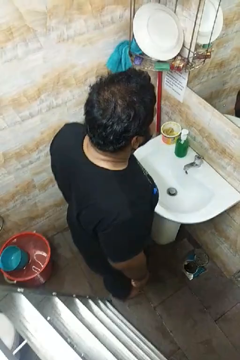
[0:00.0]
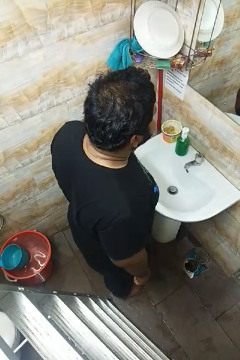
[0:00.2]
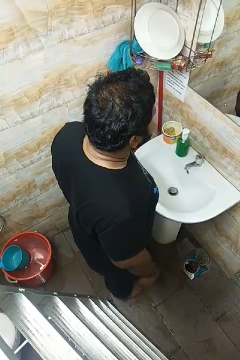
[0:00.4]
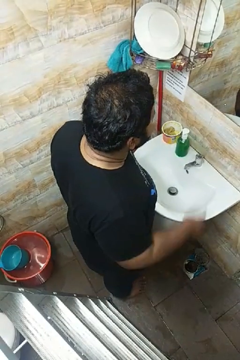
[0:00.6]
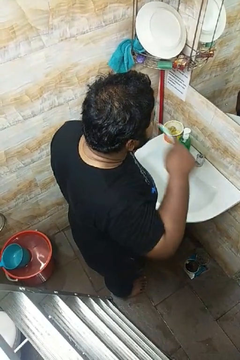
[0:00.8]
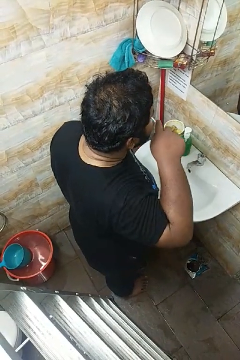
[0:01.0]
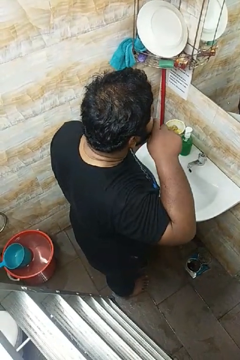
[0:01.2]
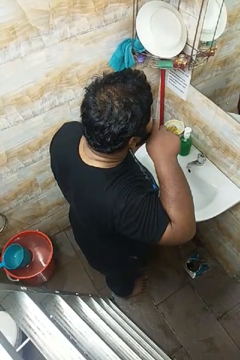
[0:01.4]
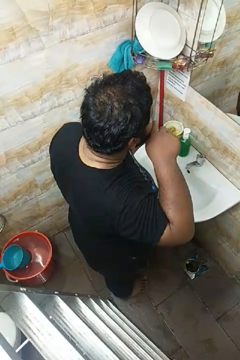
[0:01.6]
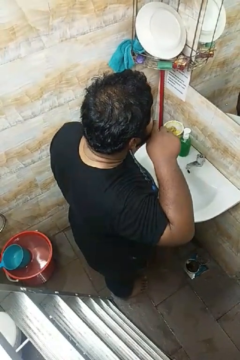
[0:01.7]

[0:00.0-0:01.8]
person brushes teeth

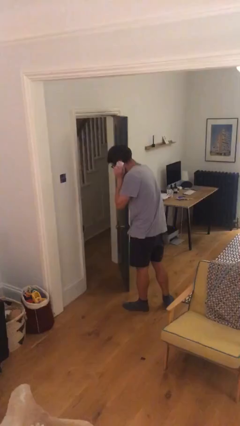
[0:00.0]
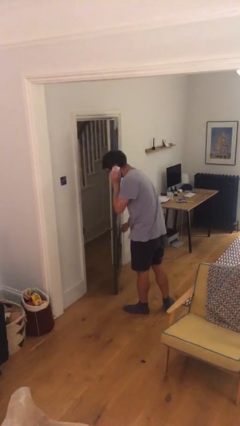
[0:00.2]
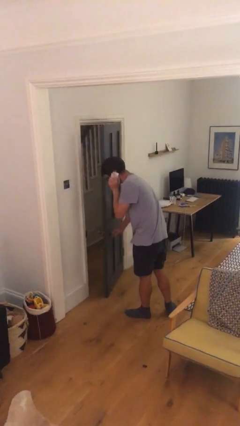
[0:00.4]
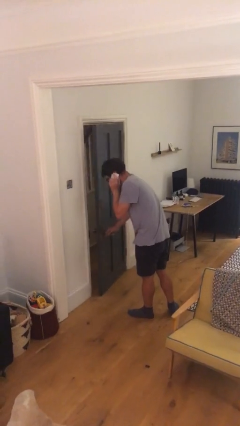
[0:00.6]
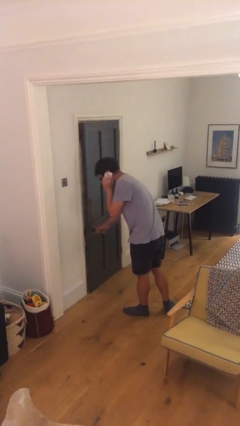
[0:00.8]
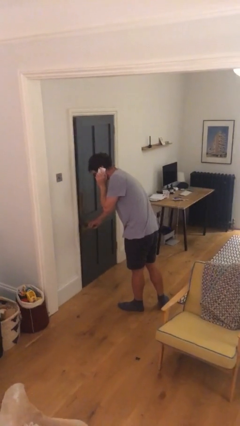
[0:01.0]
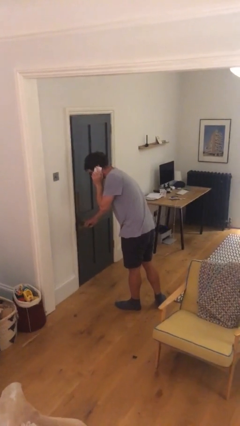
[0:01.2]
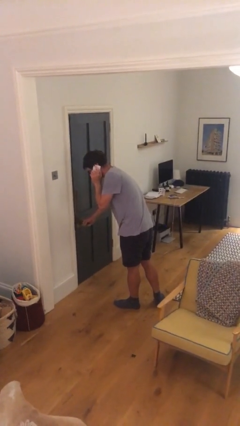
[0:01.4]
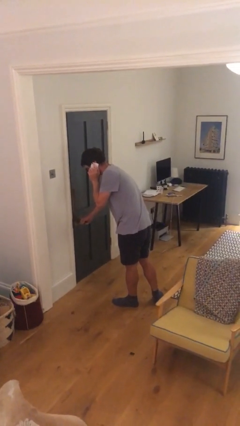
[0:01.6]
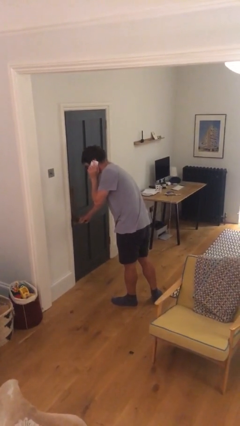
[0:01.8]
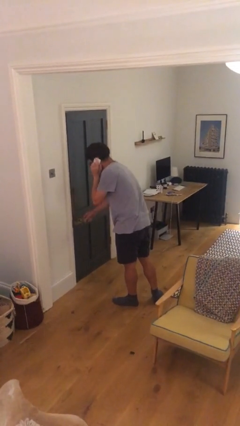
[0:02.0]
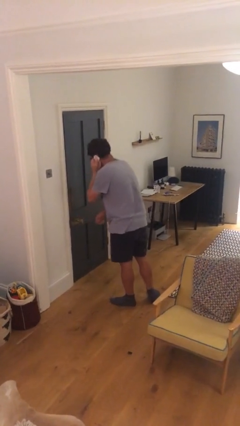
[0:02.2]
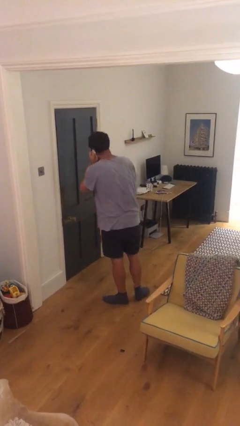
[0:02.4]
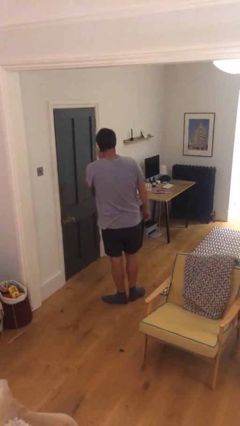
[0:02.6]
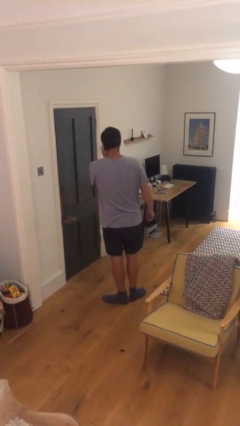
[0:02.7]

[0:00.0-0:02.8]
person closes facility door

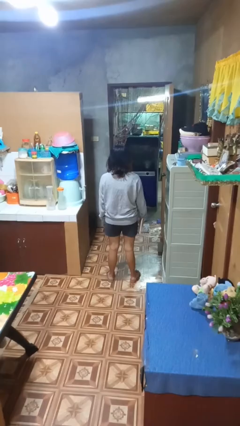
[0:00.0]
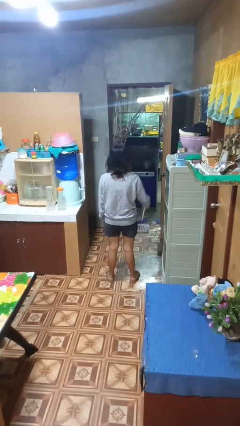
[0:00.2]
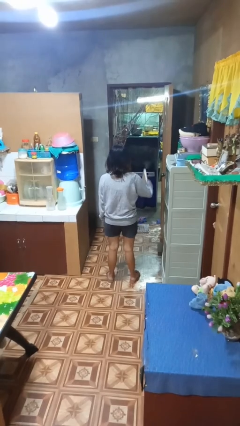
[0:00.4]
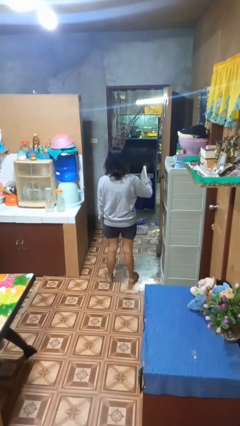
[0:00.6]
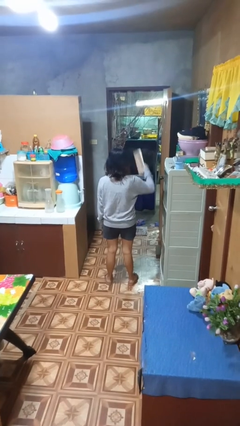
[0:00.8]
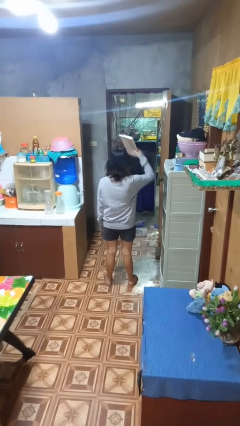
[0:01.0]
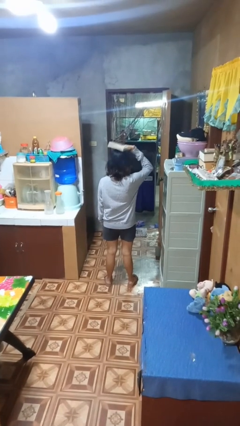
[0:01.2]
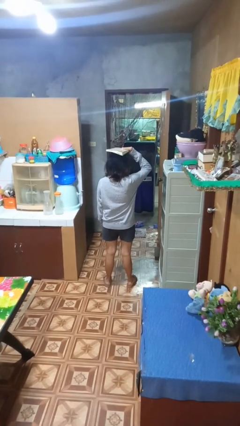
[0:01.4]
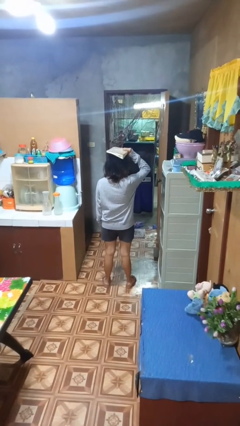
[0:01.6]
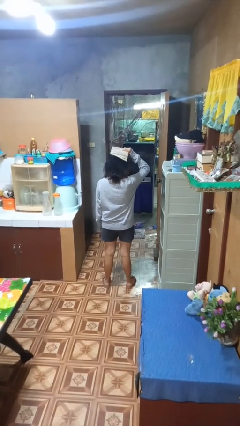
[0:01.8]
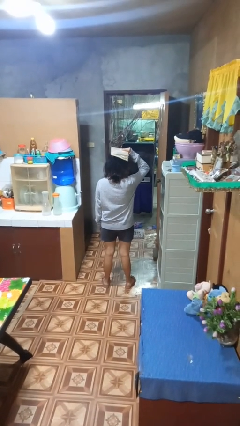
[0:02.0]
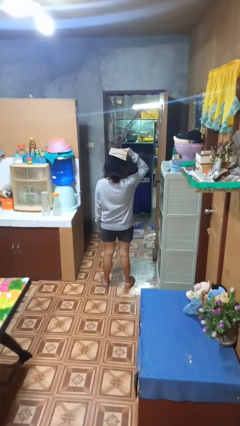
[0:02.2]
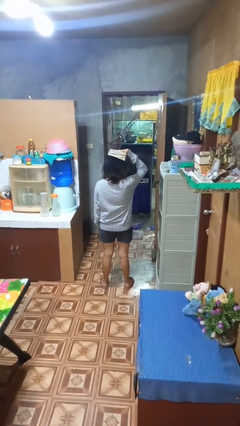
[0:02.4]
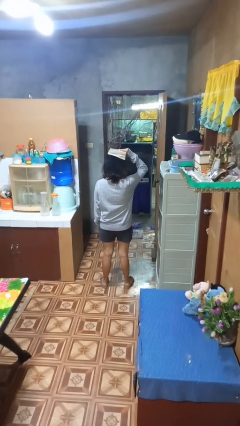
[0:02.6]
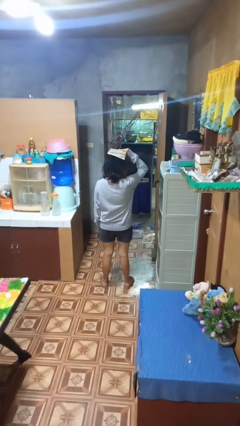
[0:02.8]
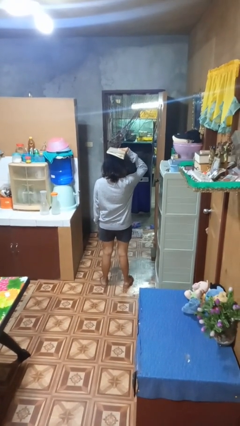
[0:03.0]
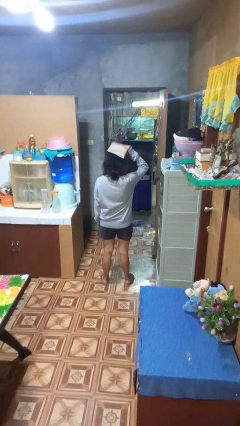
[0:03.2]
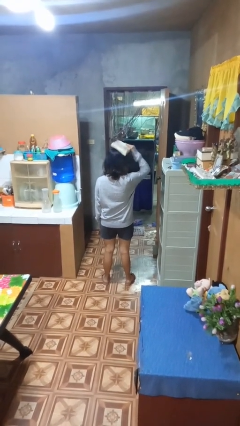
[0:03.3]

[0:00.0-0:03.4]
person holds object above head

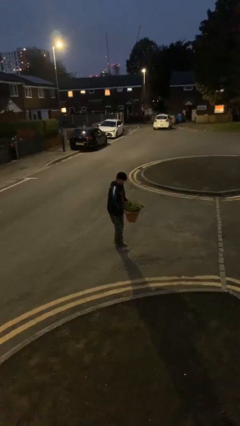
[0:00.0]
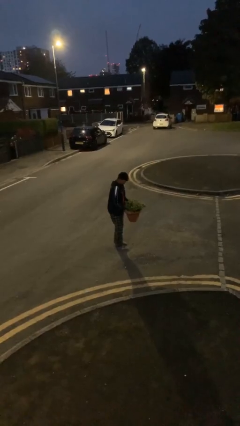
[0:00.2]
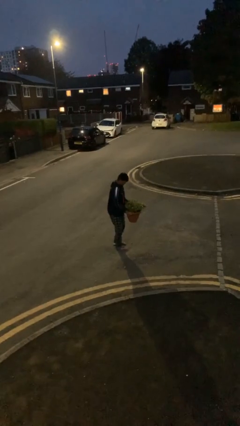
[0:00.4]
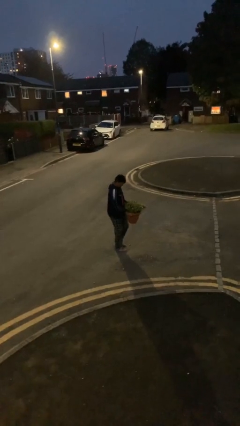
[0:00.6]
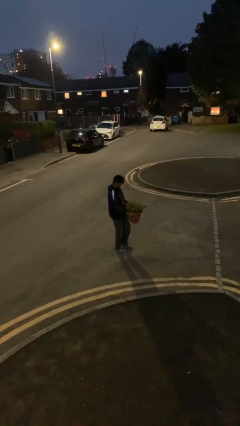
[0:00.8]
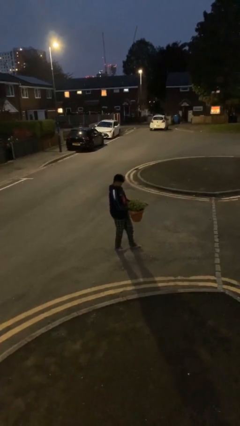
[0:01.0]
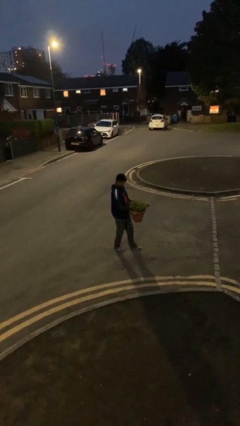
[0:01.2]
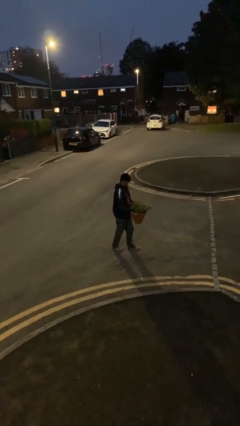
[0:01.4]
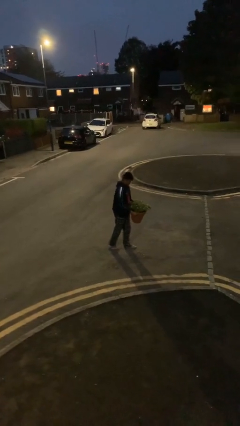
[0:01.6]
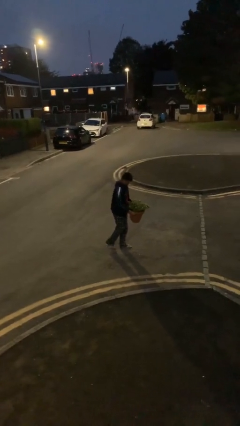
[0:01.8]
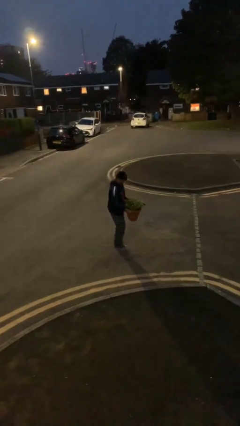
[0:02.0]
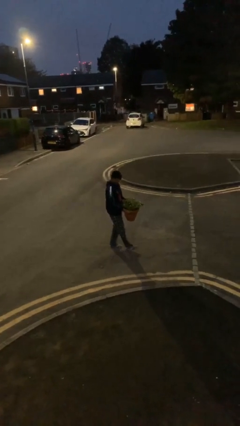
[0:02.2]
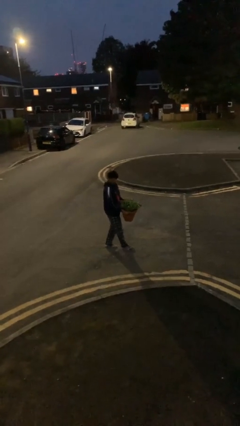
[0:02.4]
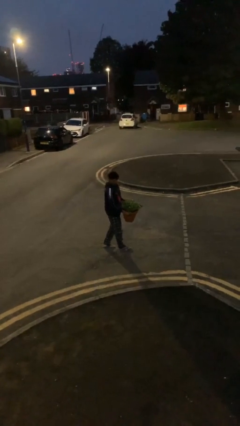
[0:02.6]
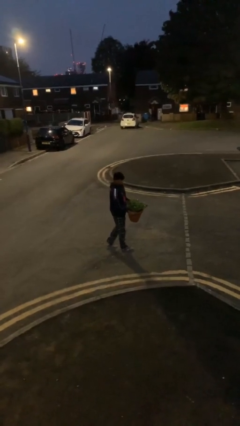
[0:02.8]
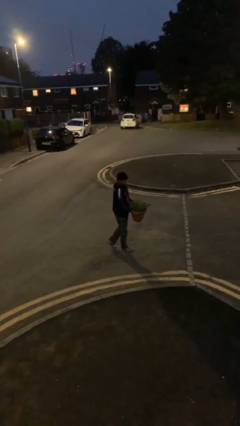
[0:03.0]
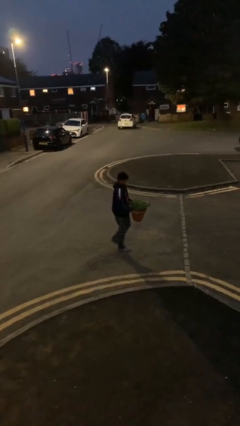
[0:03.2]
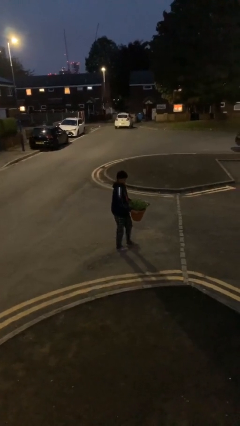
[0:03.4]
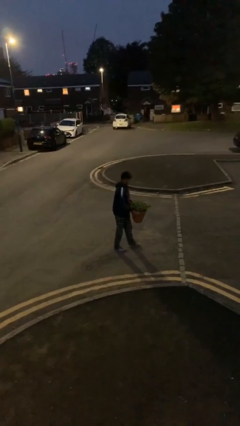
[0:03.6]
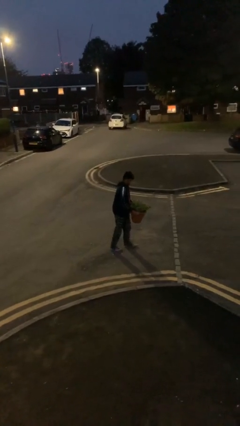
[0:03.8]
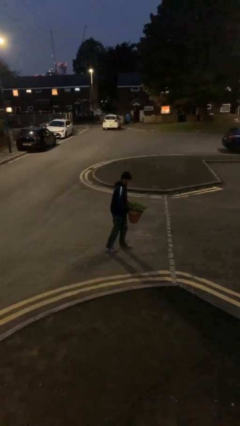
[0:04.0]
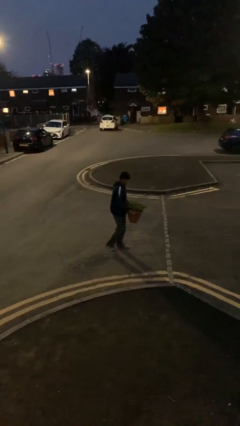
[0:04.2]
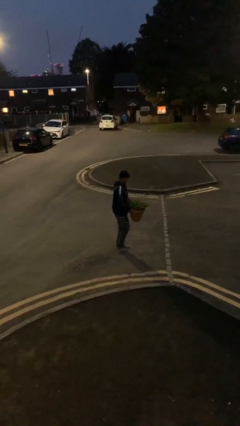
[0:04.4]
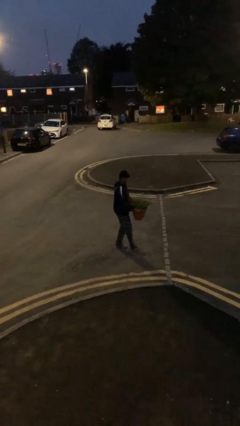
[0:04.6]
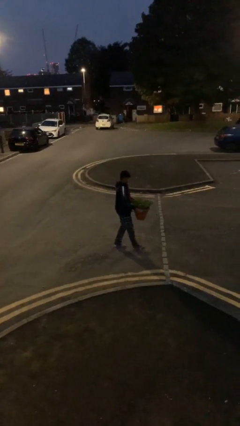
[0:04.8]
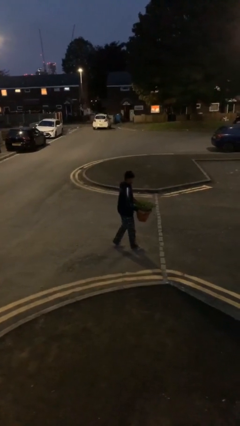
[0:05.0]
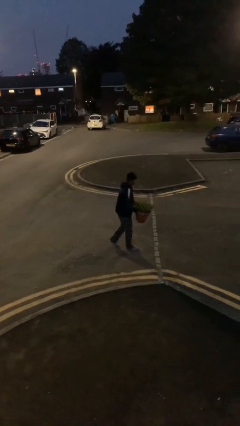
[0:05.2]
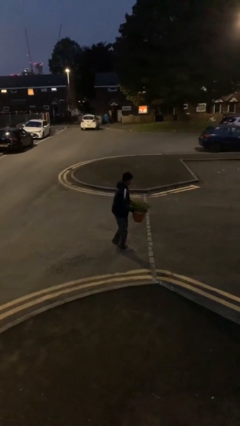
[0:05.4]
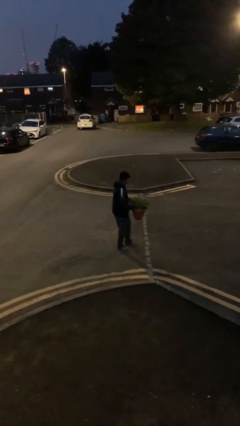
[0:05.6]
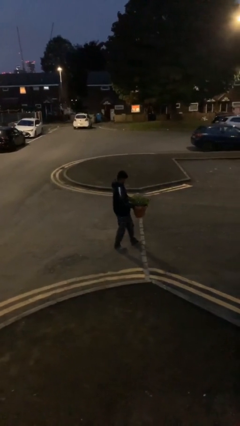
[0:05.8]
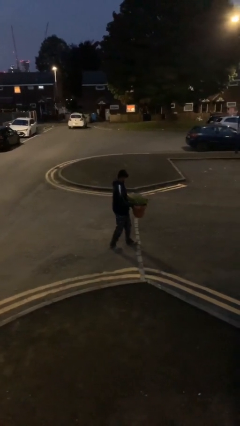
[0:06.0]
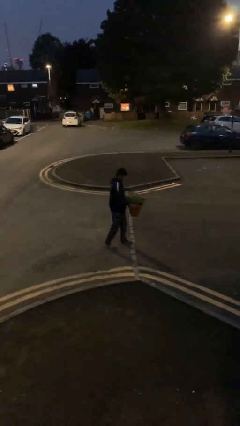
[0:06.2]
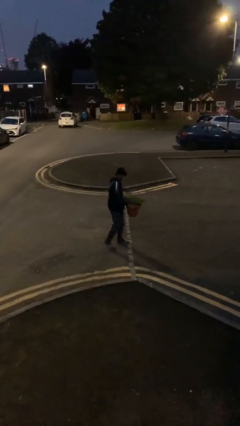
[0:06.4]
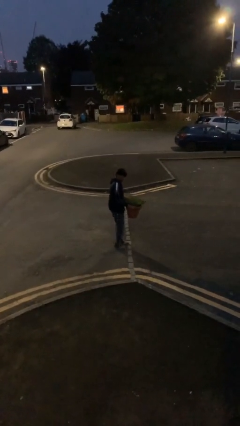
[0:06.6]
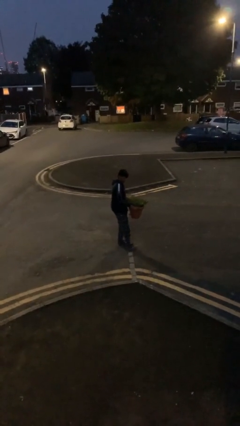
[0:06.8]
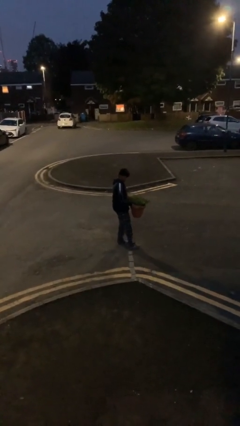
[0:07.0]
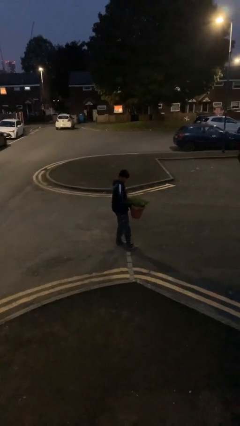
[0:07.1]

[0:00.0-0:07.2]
person carries heavy object

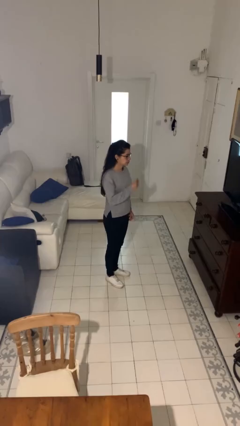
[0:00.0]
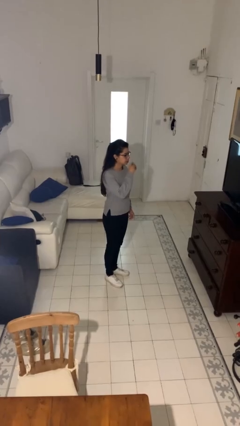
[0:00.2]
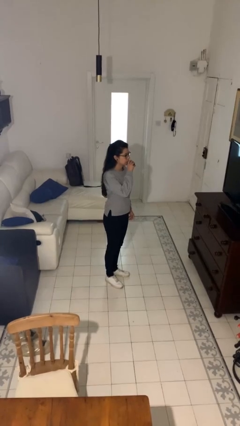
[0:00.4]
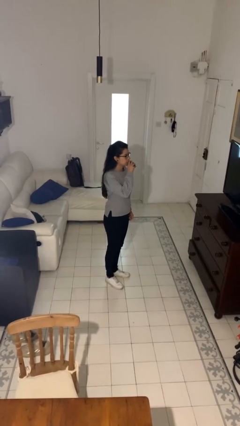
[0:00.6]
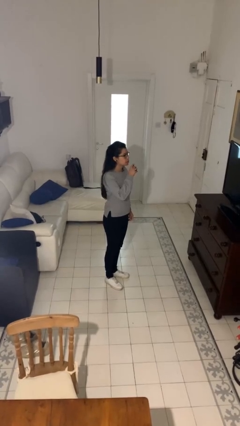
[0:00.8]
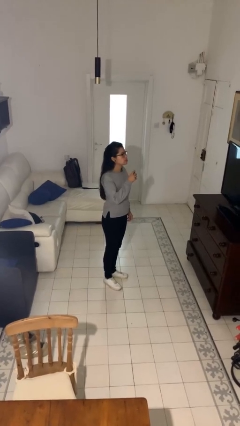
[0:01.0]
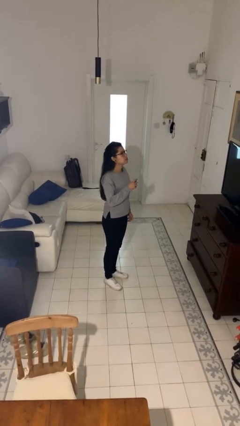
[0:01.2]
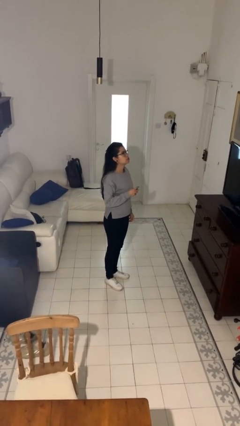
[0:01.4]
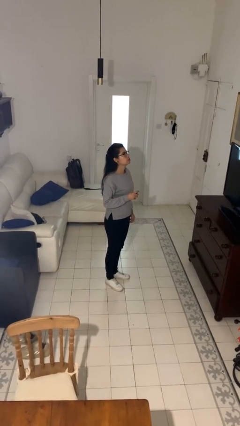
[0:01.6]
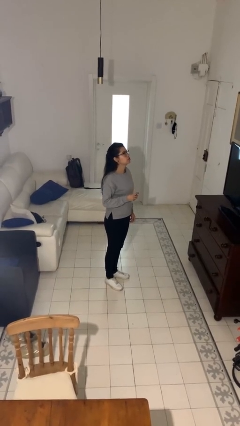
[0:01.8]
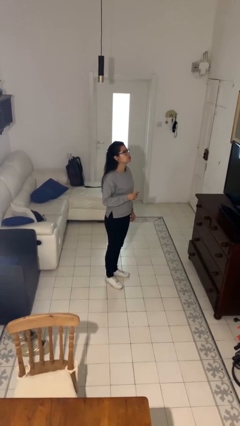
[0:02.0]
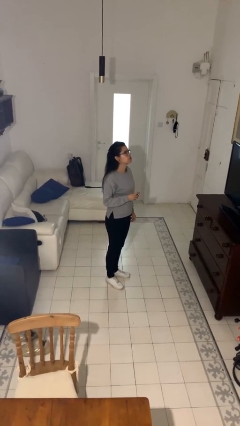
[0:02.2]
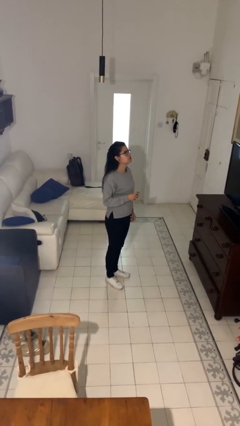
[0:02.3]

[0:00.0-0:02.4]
person vapes

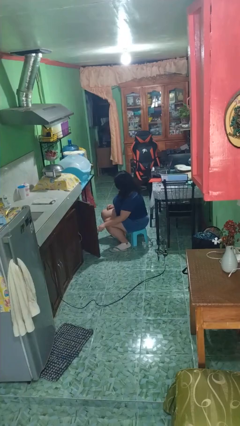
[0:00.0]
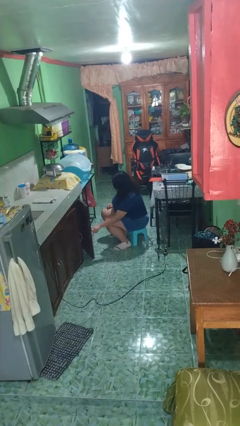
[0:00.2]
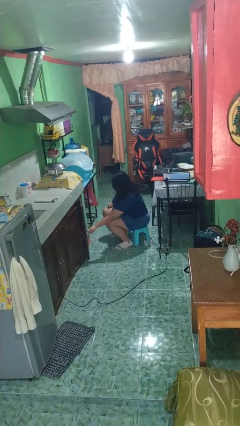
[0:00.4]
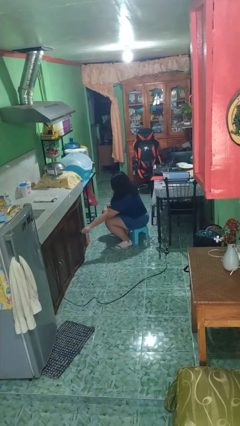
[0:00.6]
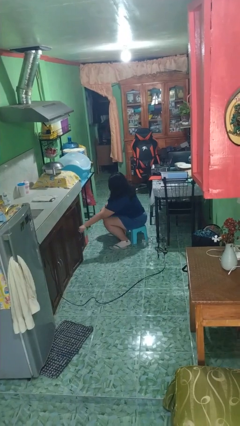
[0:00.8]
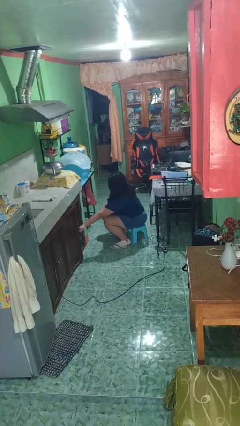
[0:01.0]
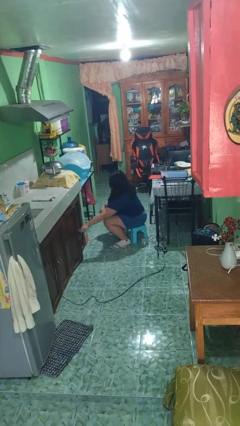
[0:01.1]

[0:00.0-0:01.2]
person closes cabinet
